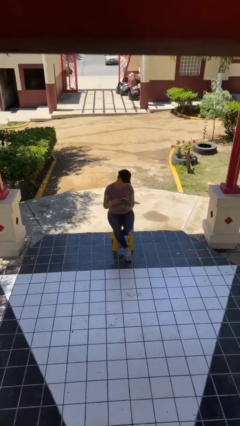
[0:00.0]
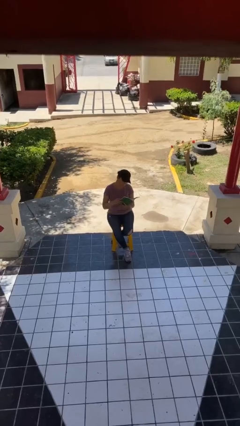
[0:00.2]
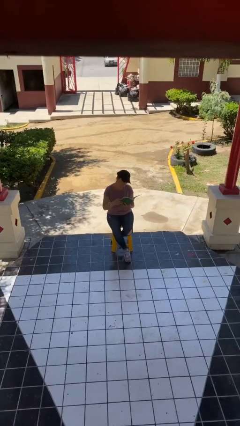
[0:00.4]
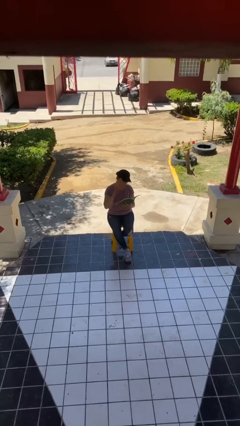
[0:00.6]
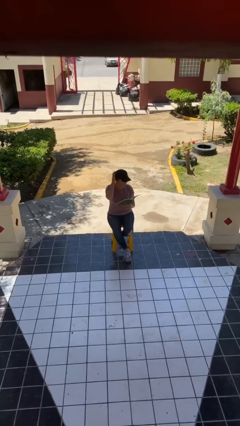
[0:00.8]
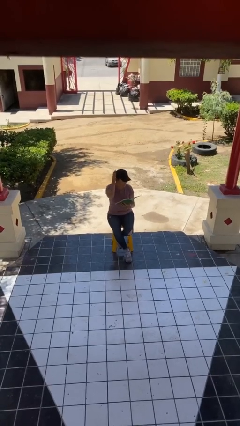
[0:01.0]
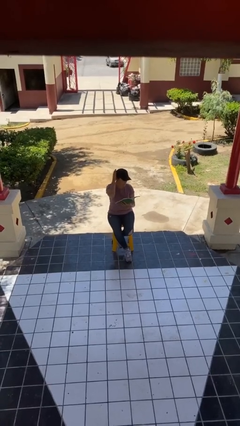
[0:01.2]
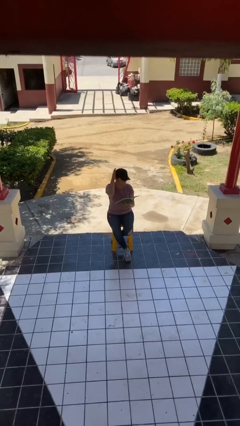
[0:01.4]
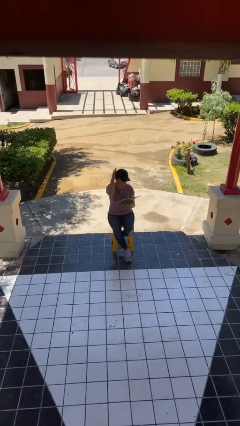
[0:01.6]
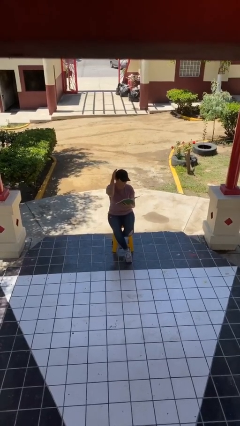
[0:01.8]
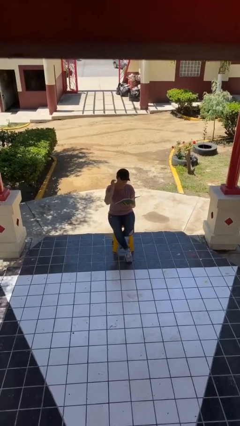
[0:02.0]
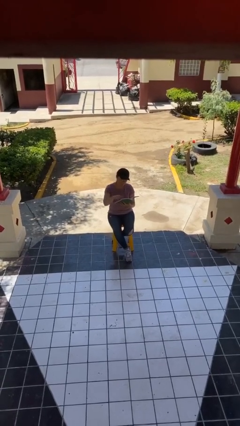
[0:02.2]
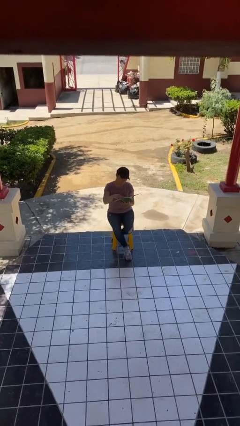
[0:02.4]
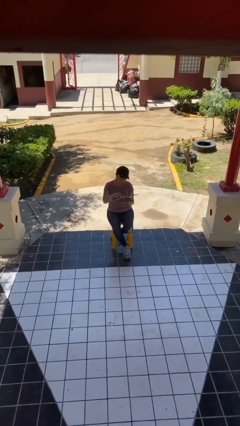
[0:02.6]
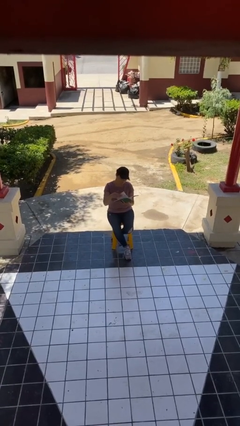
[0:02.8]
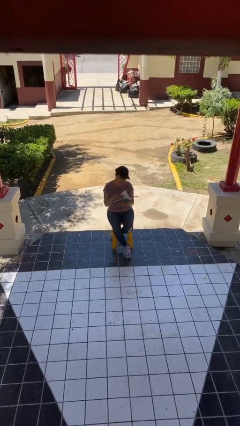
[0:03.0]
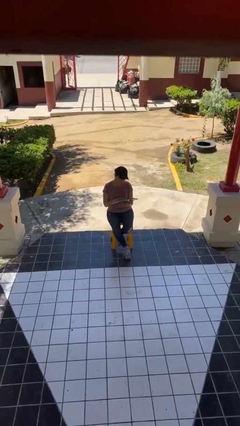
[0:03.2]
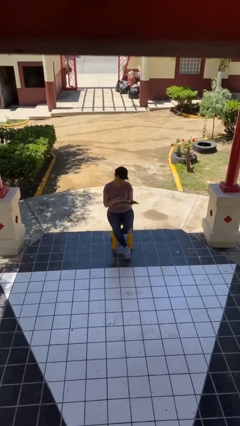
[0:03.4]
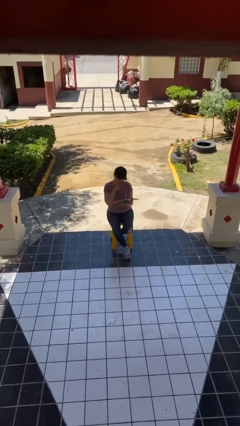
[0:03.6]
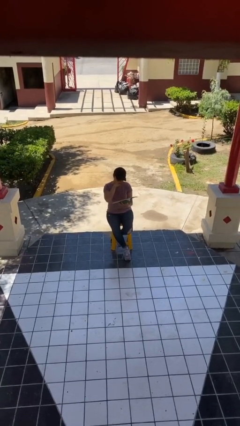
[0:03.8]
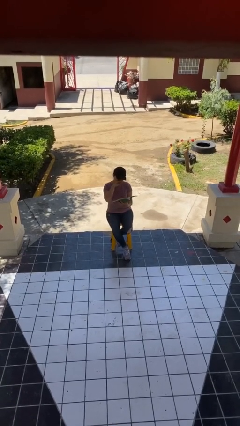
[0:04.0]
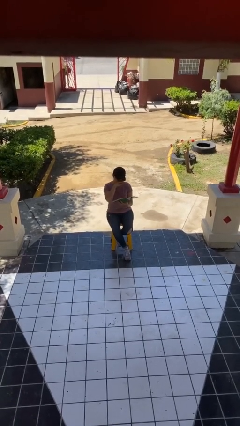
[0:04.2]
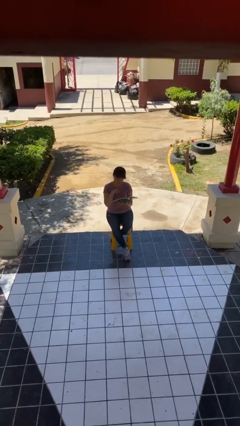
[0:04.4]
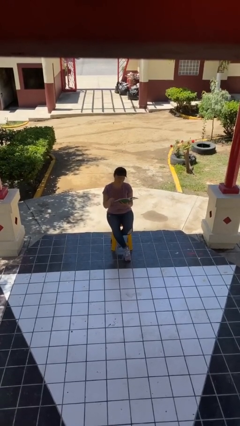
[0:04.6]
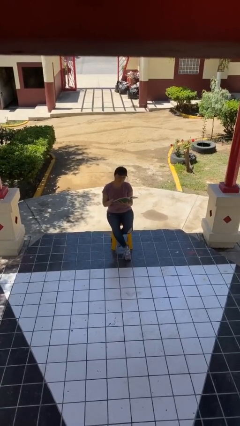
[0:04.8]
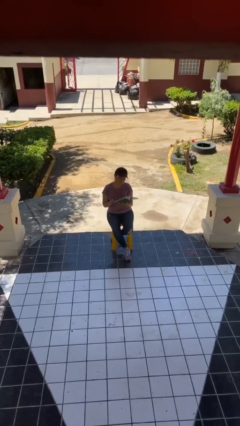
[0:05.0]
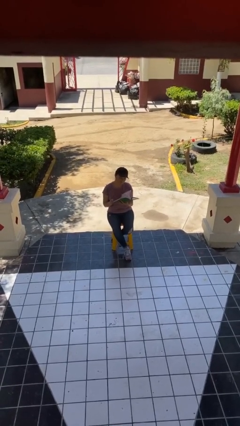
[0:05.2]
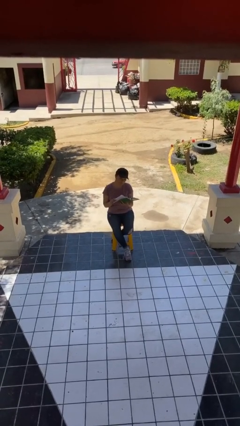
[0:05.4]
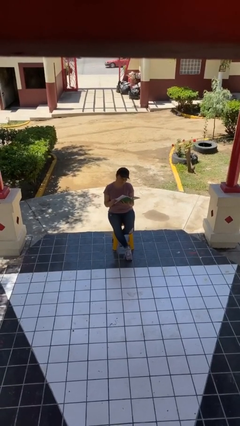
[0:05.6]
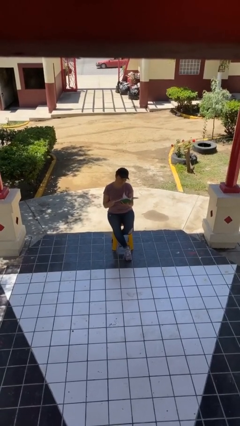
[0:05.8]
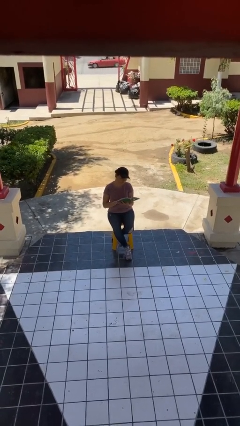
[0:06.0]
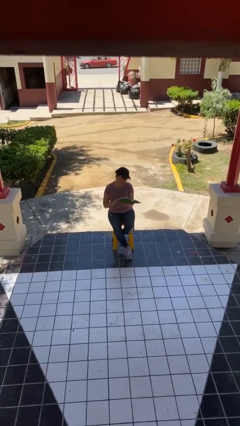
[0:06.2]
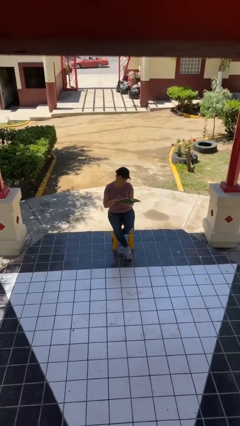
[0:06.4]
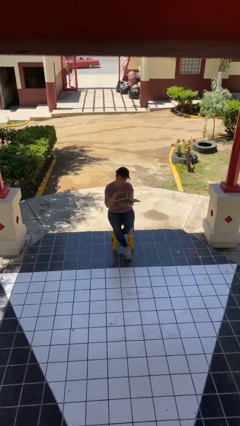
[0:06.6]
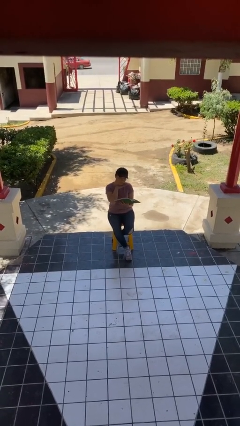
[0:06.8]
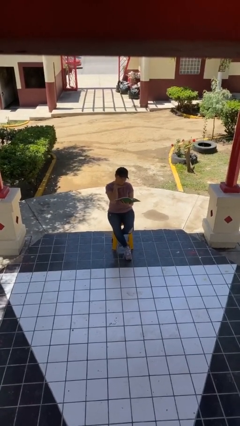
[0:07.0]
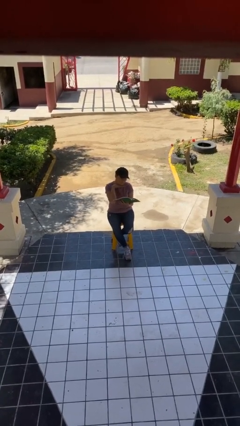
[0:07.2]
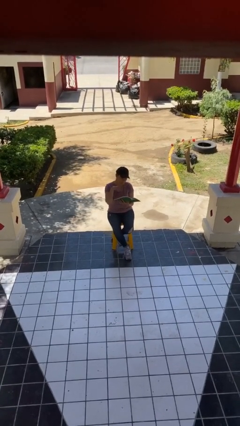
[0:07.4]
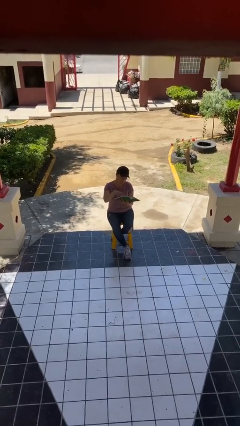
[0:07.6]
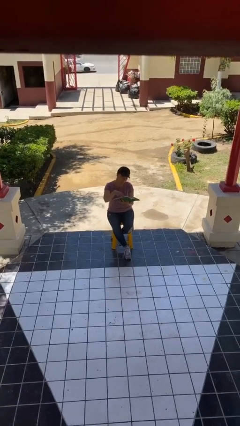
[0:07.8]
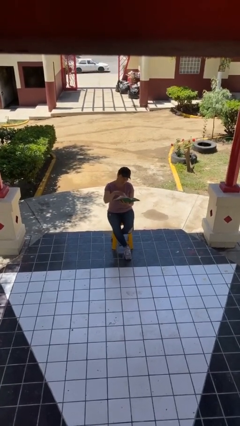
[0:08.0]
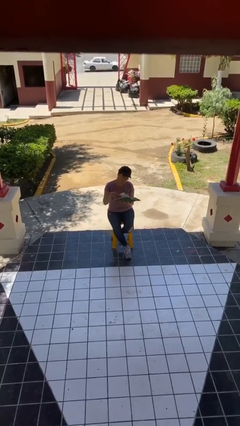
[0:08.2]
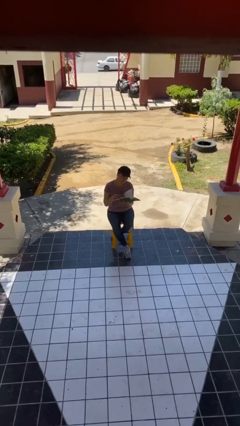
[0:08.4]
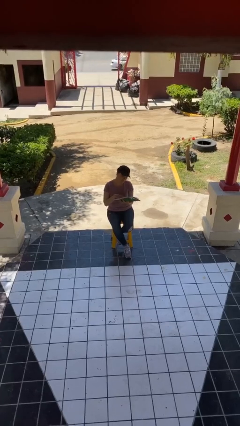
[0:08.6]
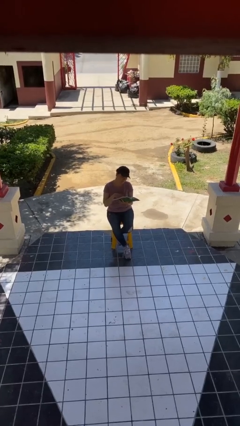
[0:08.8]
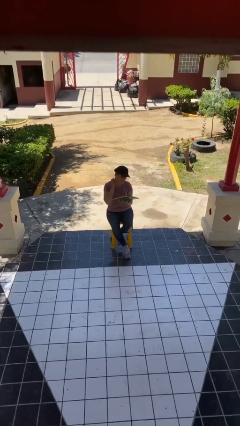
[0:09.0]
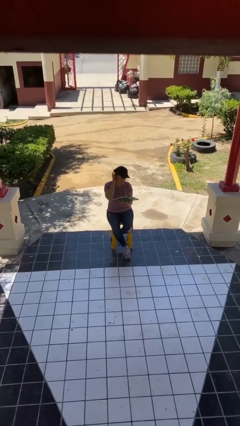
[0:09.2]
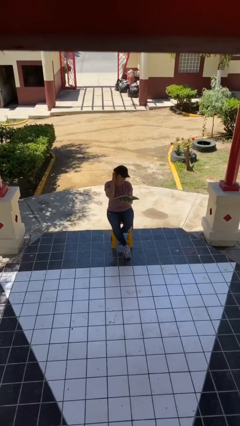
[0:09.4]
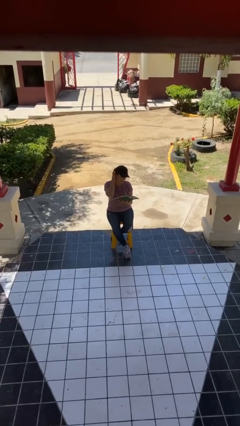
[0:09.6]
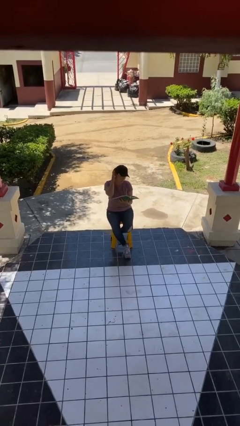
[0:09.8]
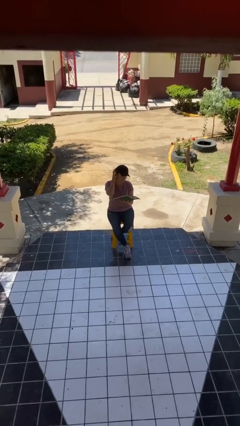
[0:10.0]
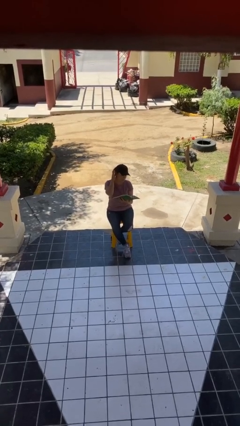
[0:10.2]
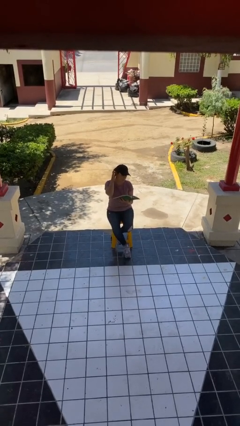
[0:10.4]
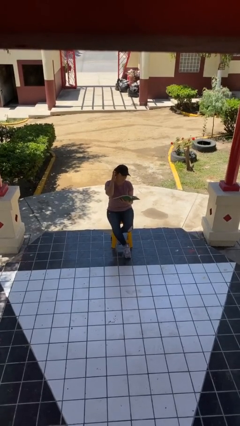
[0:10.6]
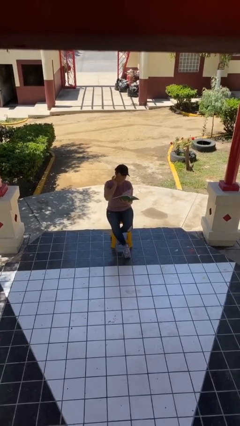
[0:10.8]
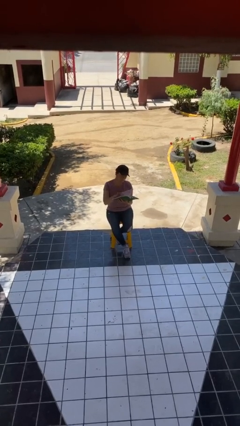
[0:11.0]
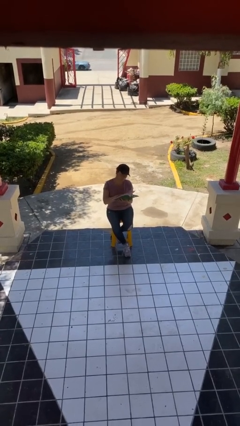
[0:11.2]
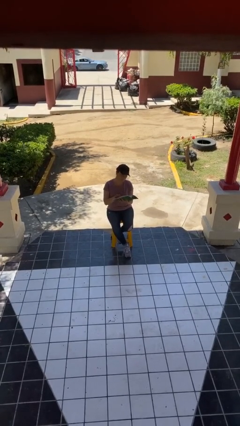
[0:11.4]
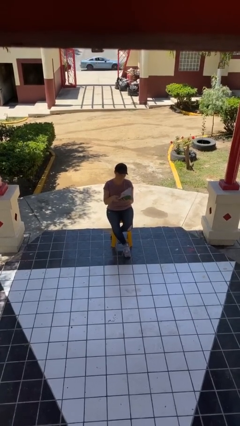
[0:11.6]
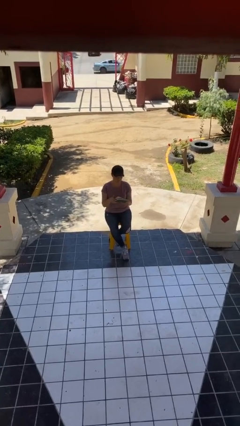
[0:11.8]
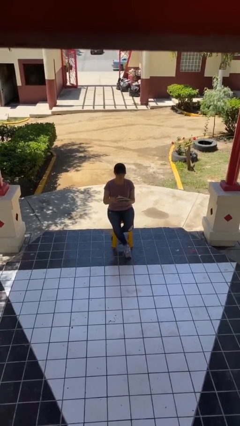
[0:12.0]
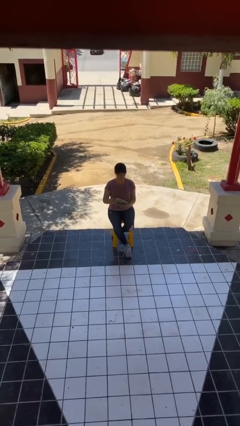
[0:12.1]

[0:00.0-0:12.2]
person reads document

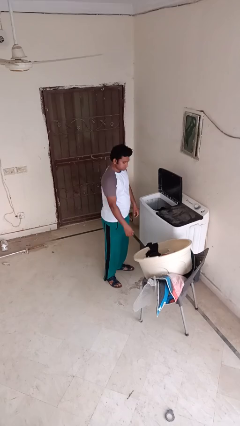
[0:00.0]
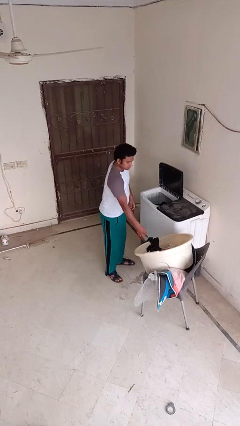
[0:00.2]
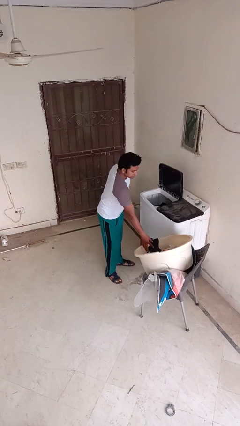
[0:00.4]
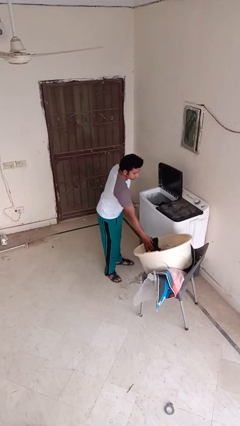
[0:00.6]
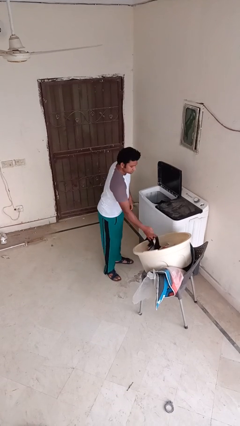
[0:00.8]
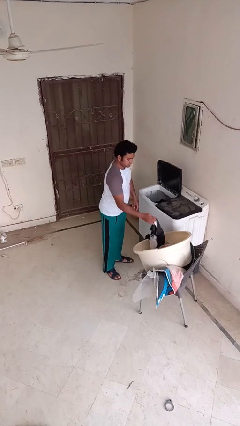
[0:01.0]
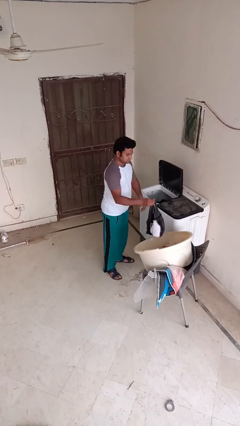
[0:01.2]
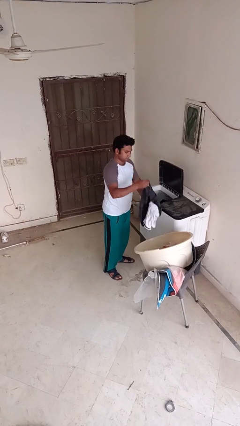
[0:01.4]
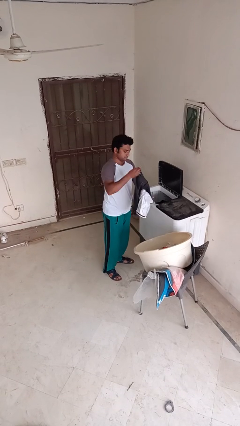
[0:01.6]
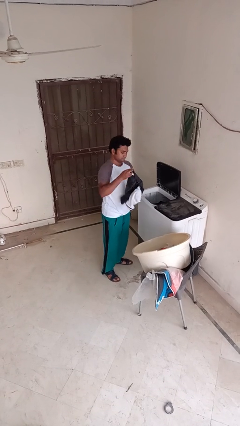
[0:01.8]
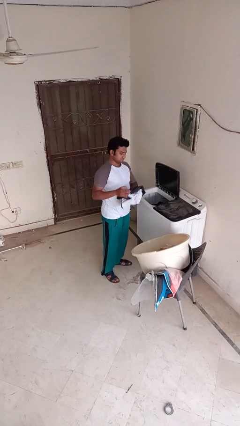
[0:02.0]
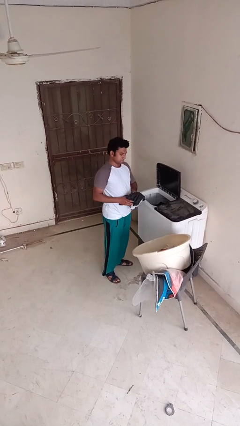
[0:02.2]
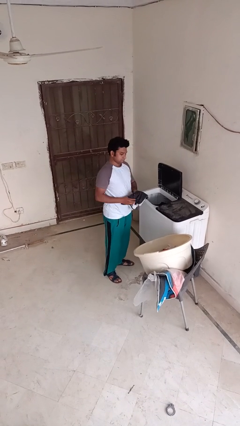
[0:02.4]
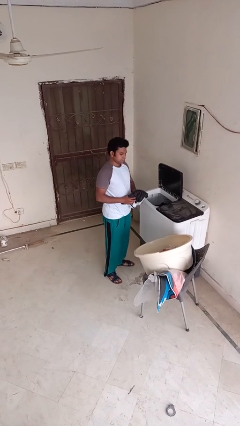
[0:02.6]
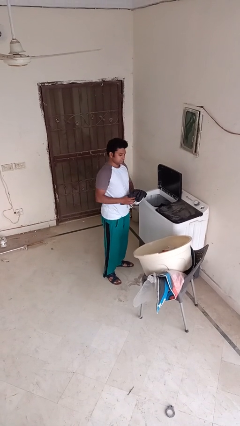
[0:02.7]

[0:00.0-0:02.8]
person unloads clotheswasher

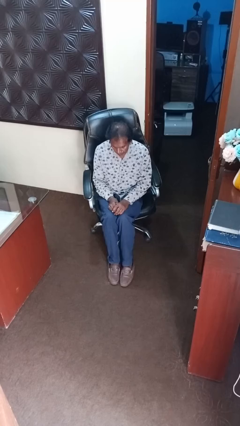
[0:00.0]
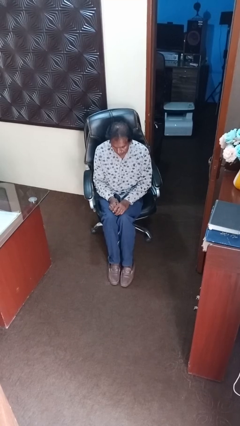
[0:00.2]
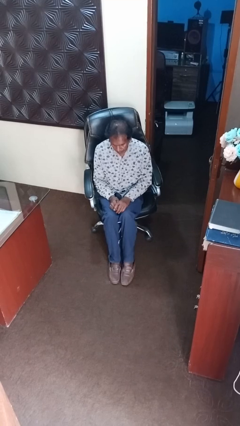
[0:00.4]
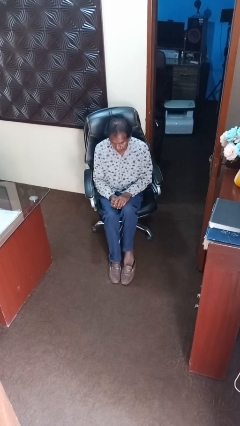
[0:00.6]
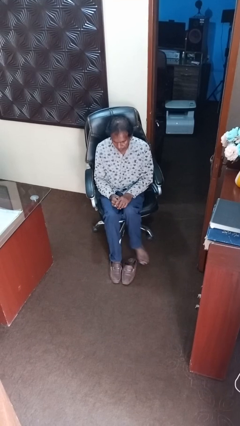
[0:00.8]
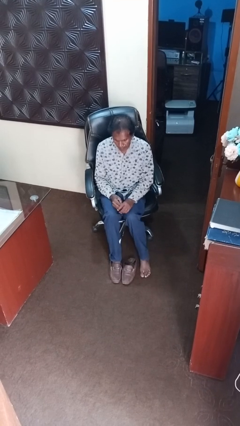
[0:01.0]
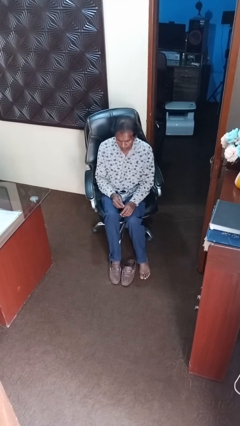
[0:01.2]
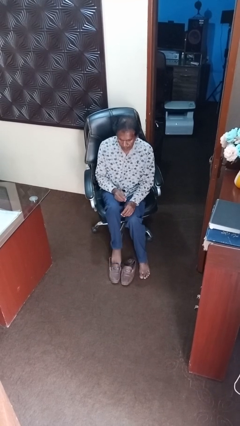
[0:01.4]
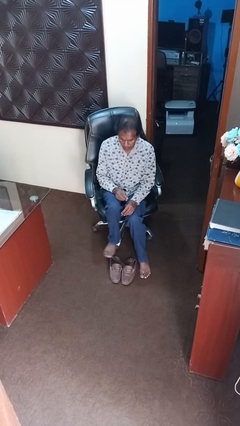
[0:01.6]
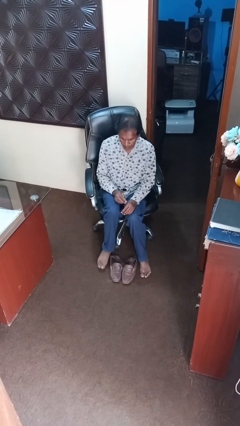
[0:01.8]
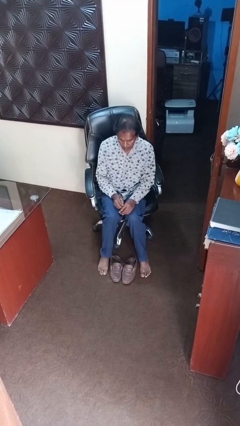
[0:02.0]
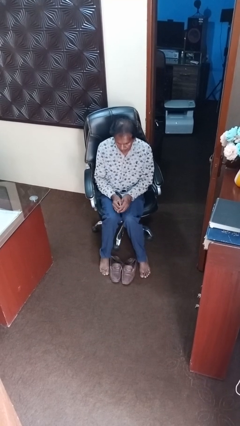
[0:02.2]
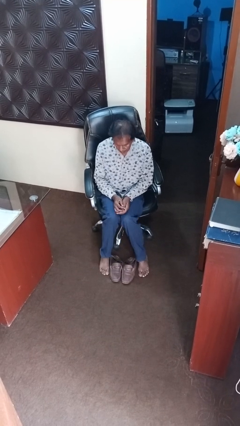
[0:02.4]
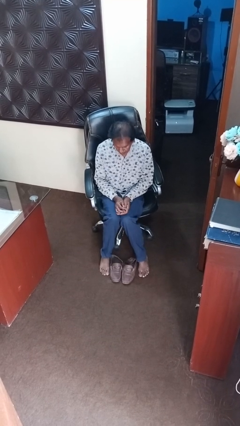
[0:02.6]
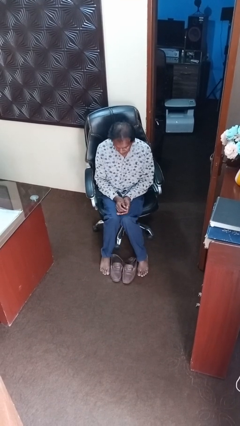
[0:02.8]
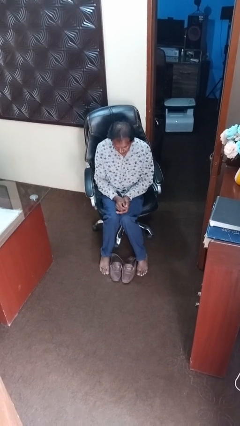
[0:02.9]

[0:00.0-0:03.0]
person takes off shoes

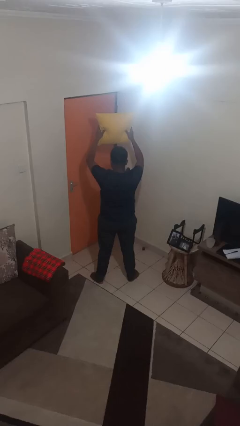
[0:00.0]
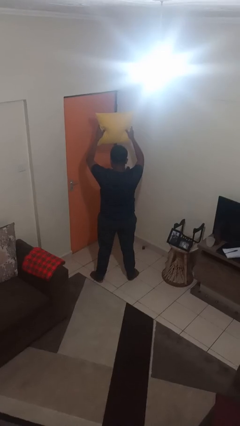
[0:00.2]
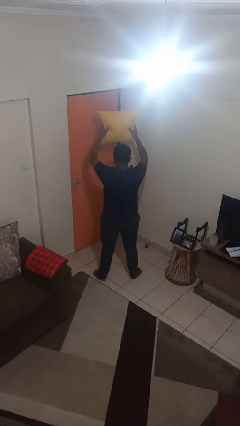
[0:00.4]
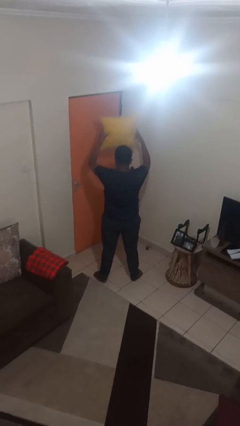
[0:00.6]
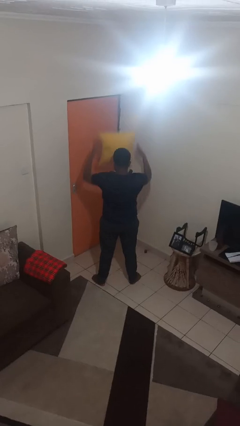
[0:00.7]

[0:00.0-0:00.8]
person drops object
